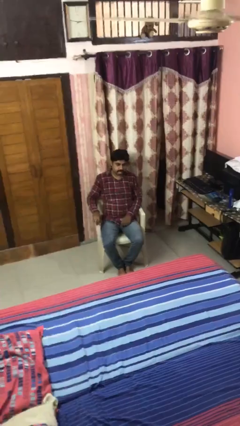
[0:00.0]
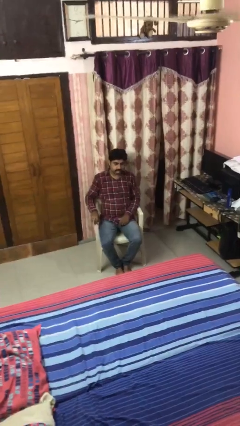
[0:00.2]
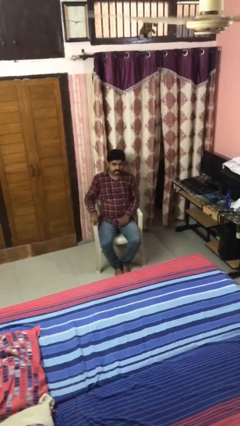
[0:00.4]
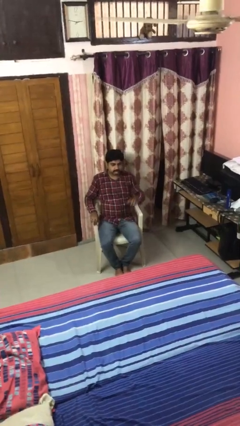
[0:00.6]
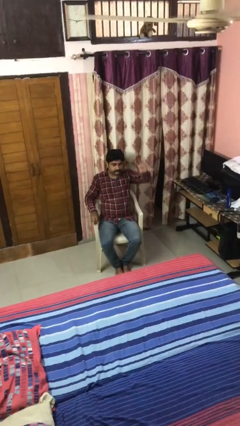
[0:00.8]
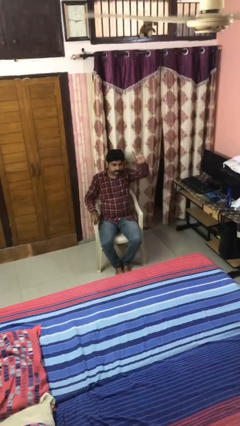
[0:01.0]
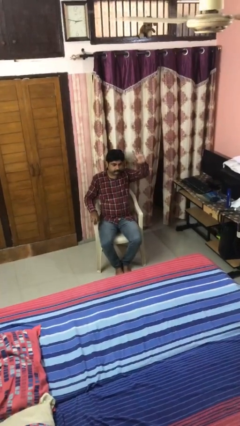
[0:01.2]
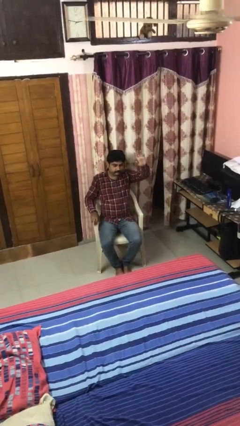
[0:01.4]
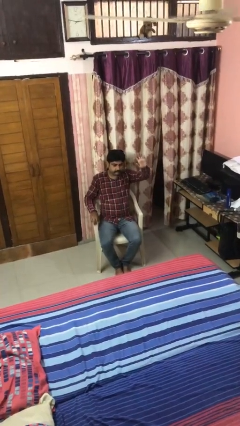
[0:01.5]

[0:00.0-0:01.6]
person gestures raise hand

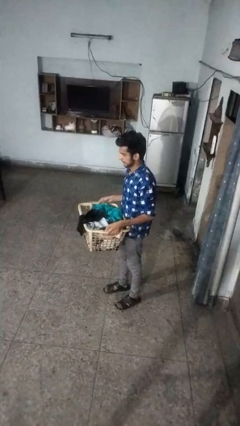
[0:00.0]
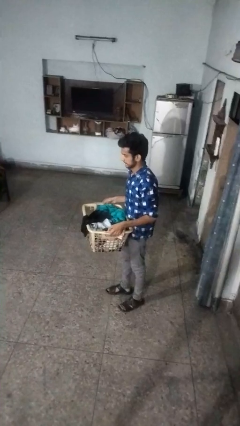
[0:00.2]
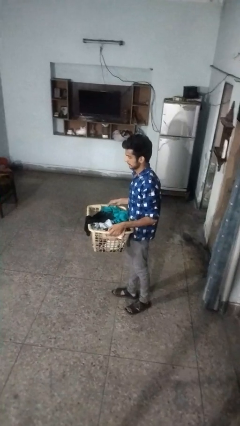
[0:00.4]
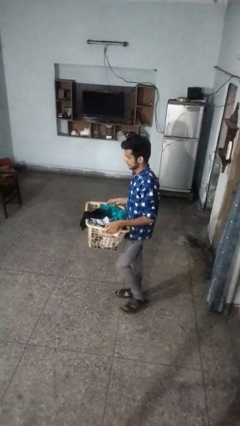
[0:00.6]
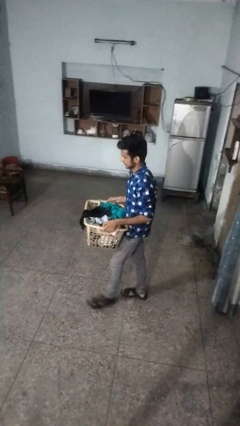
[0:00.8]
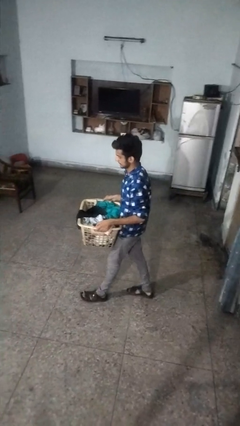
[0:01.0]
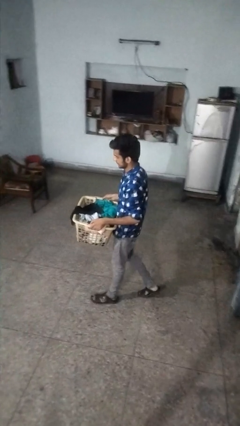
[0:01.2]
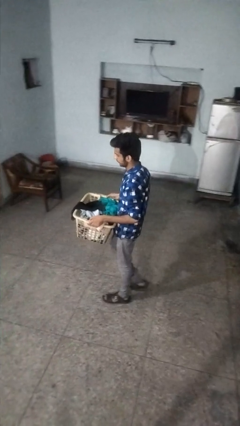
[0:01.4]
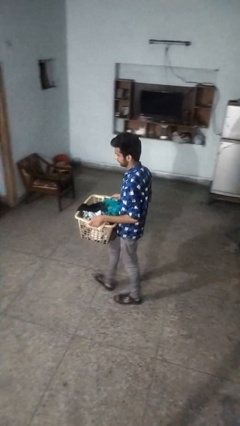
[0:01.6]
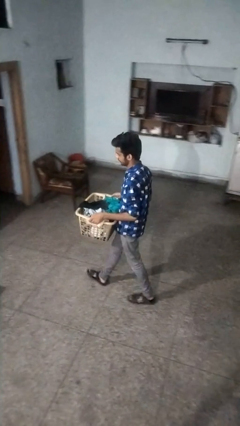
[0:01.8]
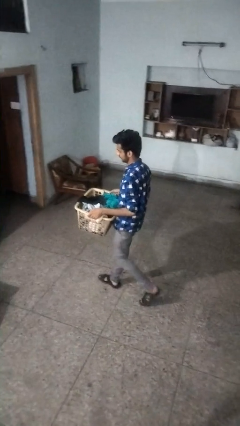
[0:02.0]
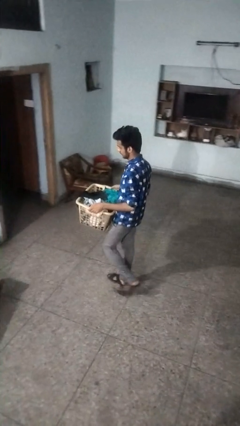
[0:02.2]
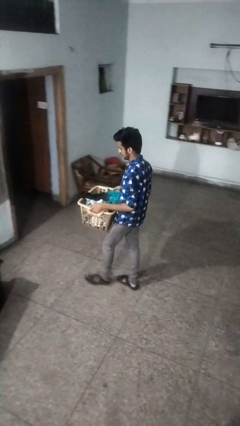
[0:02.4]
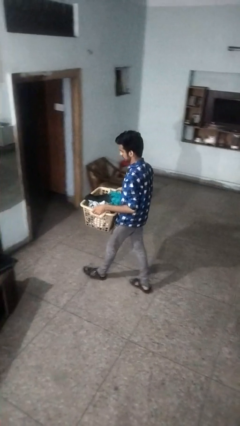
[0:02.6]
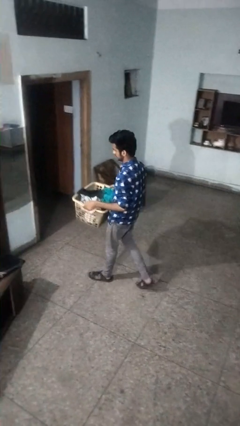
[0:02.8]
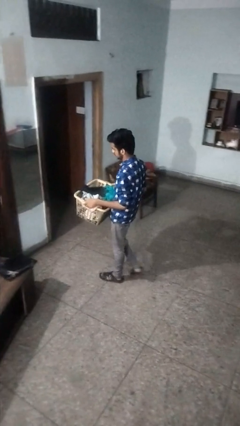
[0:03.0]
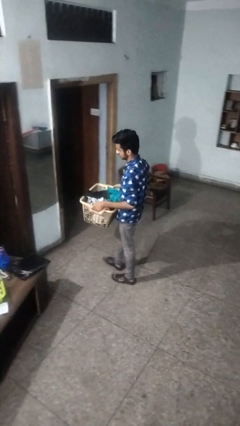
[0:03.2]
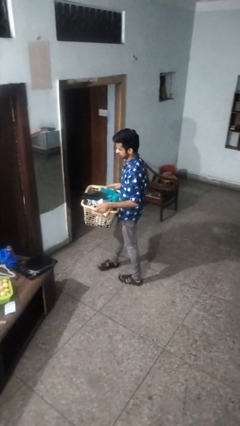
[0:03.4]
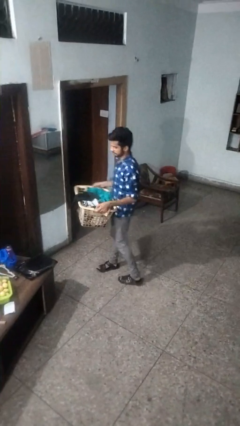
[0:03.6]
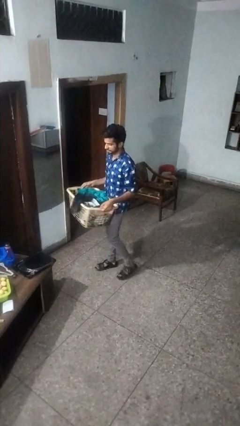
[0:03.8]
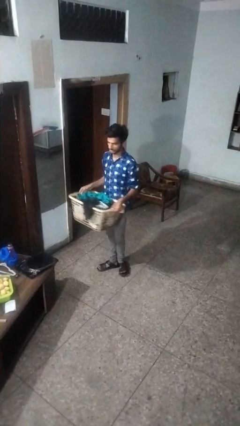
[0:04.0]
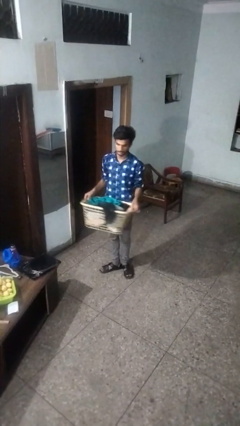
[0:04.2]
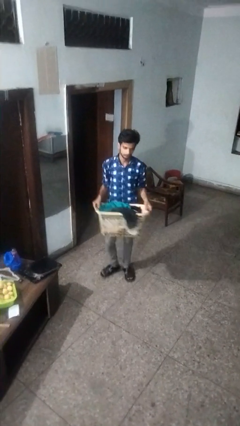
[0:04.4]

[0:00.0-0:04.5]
person carries laundry basket

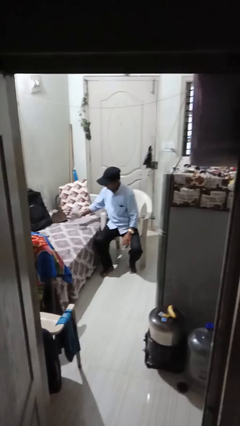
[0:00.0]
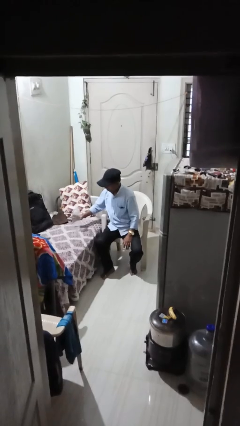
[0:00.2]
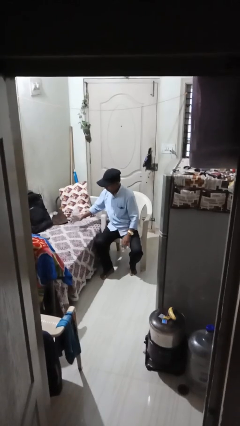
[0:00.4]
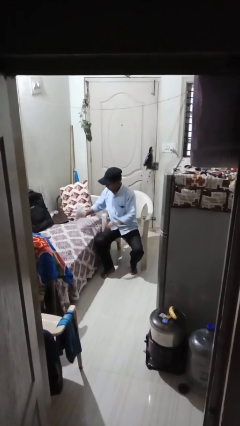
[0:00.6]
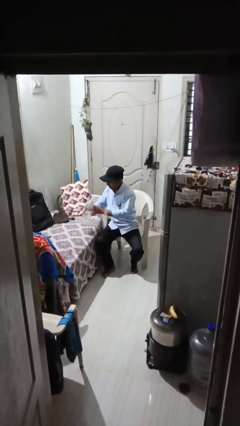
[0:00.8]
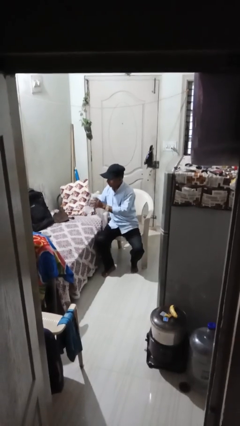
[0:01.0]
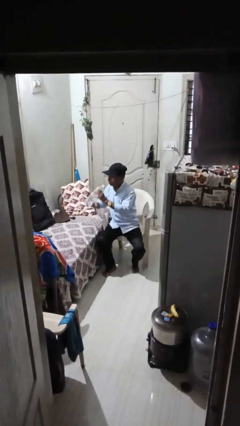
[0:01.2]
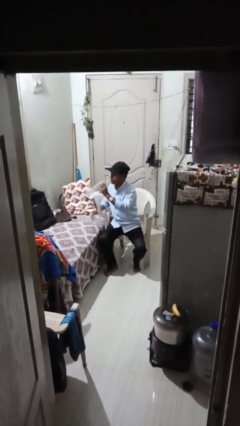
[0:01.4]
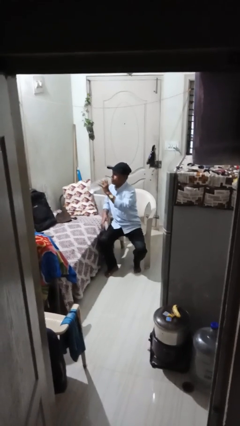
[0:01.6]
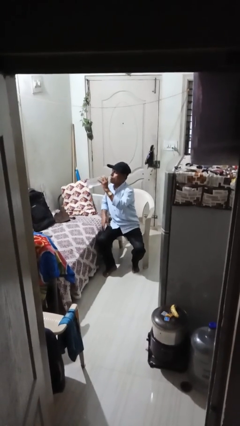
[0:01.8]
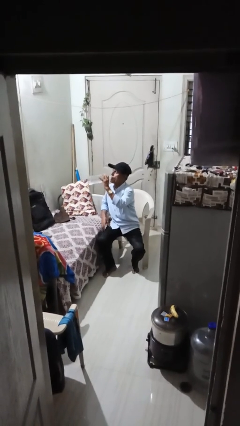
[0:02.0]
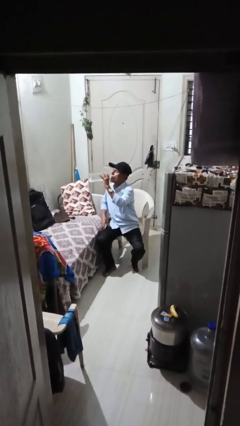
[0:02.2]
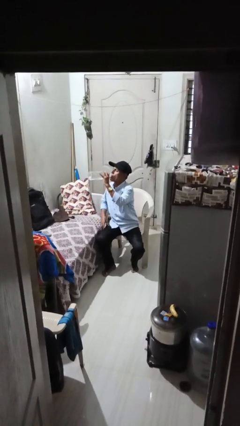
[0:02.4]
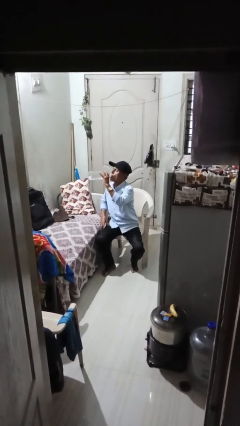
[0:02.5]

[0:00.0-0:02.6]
person drinks from bottle

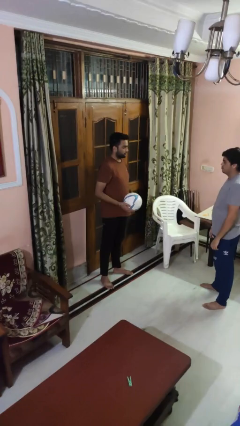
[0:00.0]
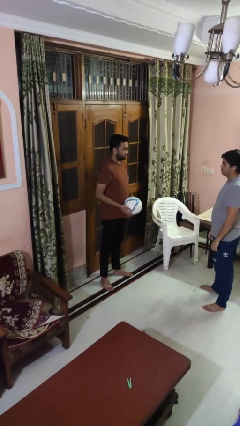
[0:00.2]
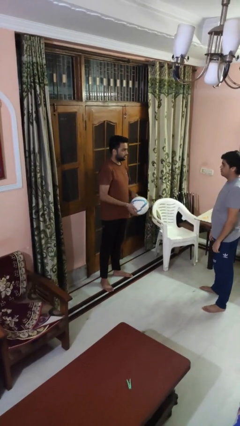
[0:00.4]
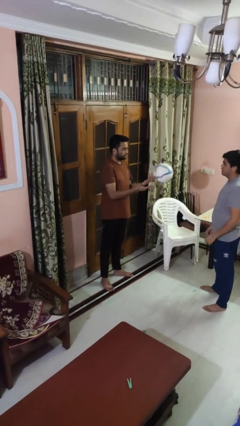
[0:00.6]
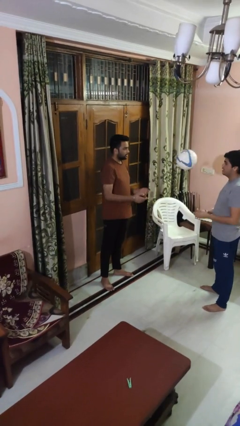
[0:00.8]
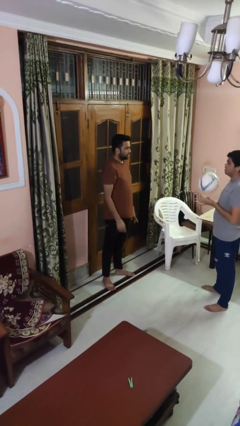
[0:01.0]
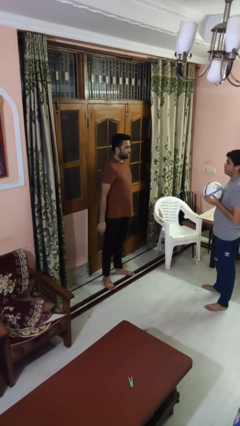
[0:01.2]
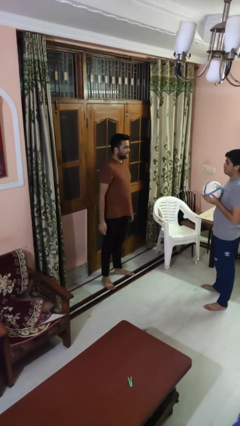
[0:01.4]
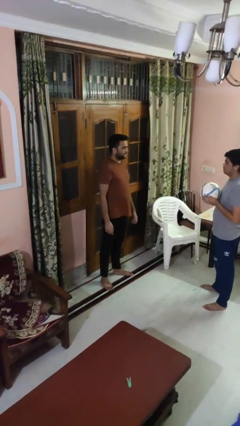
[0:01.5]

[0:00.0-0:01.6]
person throws object to person

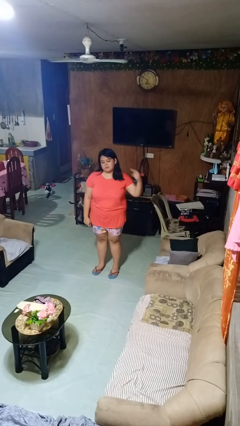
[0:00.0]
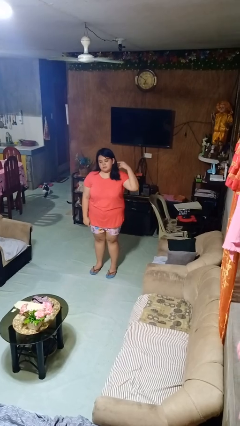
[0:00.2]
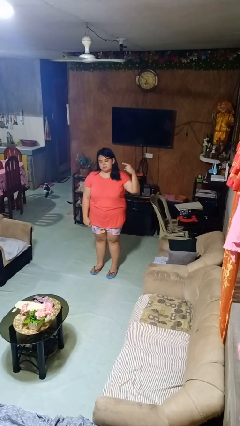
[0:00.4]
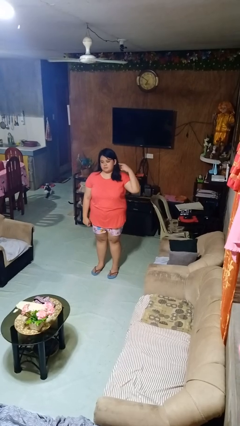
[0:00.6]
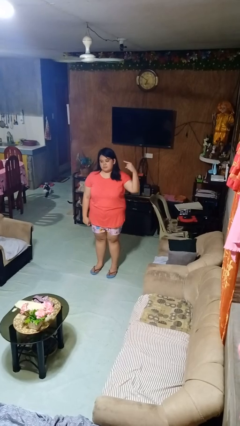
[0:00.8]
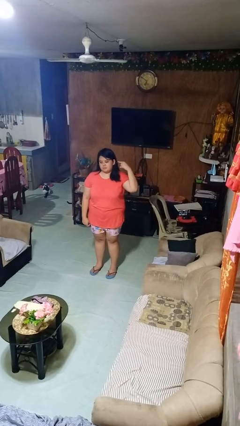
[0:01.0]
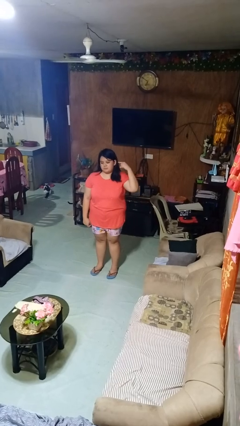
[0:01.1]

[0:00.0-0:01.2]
person gestures listen closely

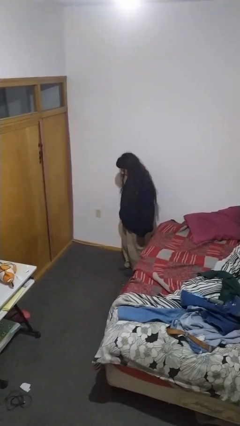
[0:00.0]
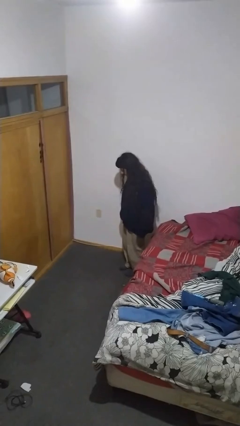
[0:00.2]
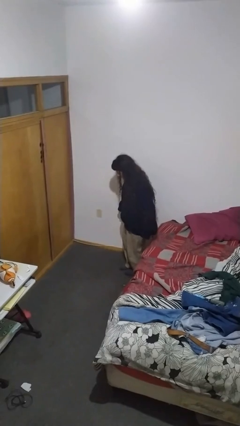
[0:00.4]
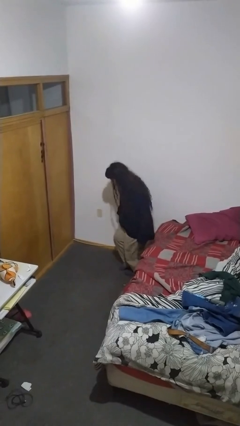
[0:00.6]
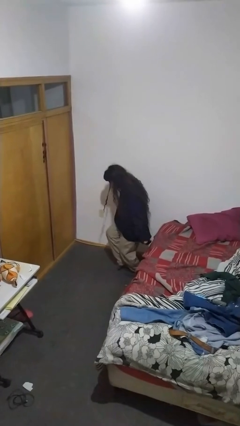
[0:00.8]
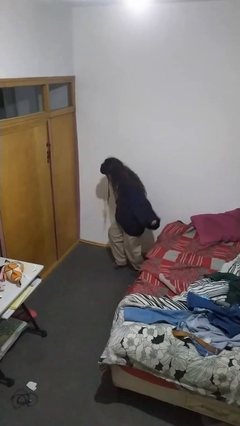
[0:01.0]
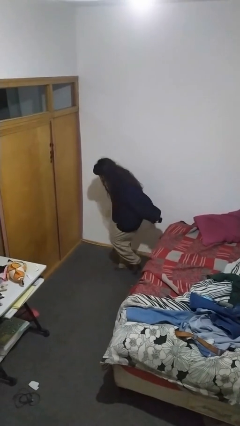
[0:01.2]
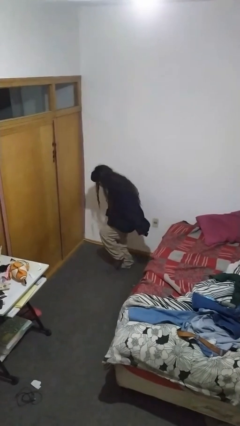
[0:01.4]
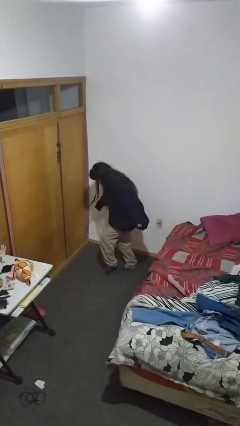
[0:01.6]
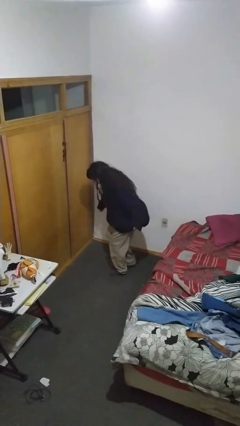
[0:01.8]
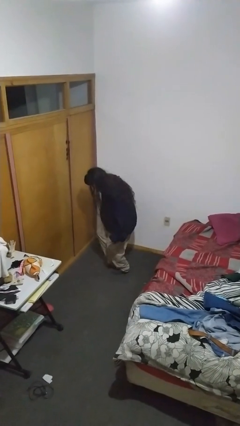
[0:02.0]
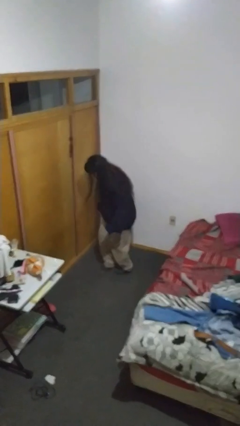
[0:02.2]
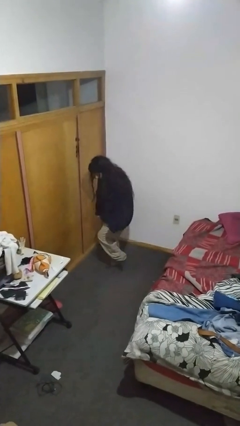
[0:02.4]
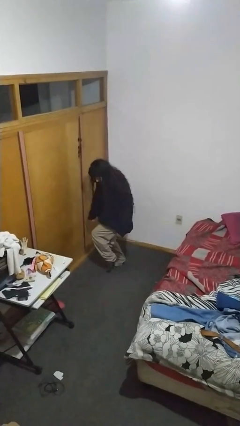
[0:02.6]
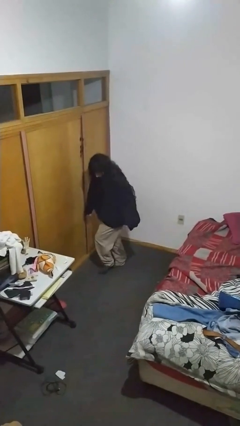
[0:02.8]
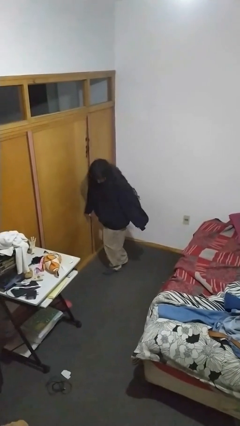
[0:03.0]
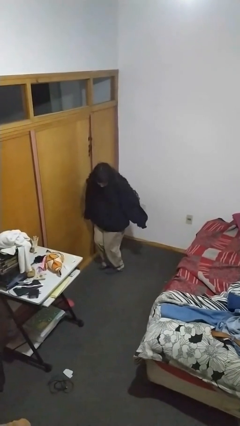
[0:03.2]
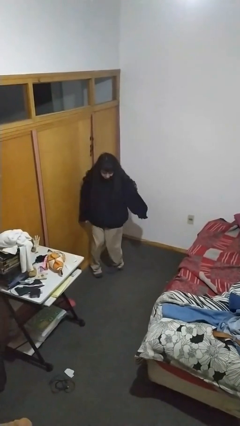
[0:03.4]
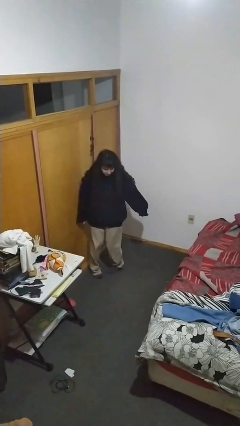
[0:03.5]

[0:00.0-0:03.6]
person walks tiptoe

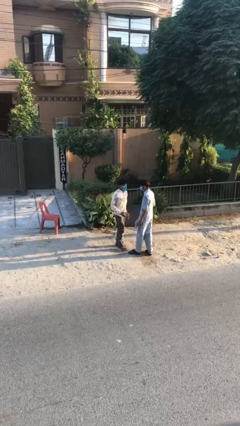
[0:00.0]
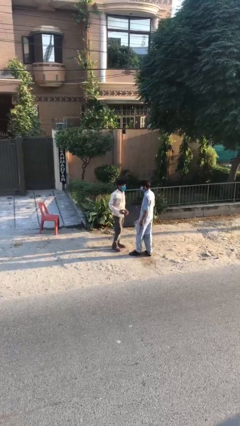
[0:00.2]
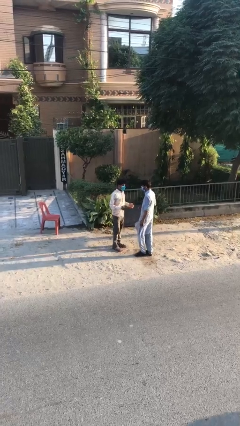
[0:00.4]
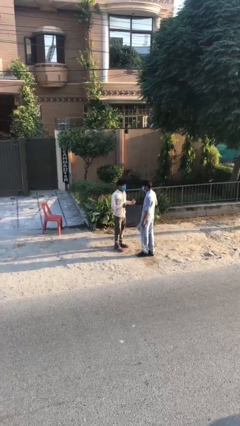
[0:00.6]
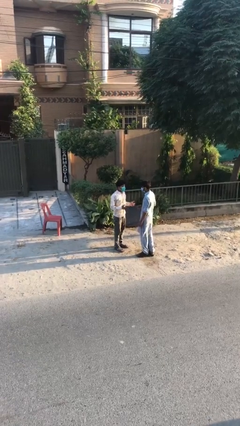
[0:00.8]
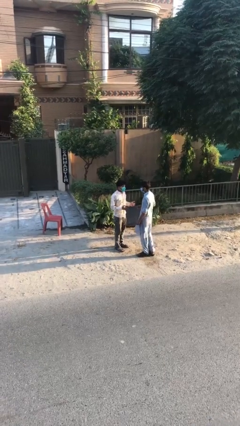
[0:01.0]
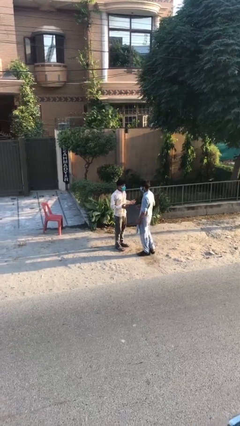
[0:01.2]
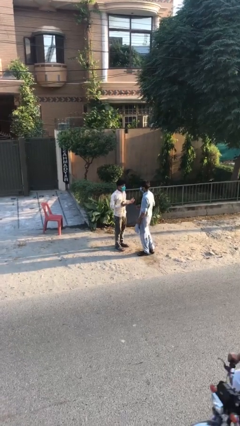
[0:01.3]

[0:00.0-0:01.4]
person talks to person

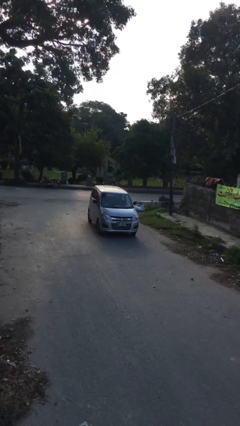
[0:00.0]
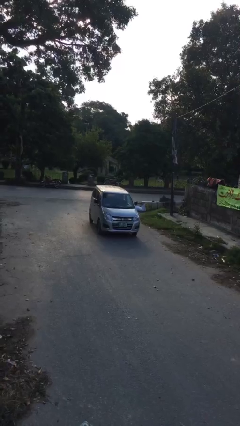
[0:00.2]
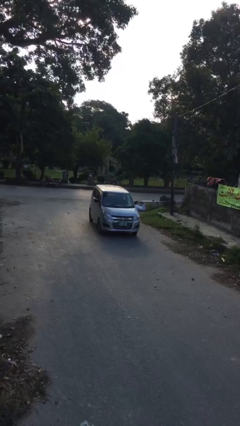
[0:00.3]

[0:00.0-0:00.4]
car drops off person
